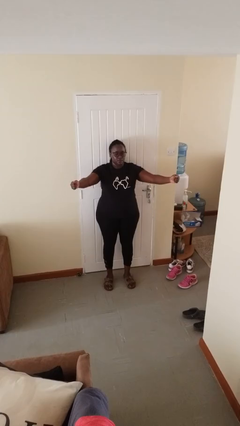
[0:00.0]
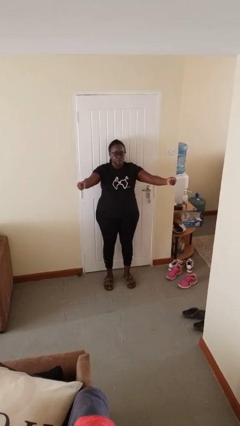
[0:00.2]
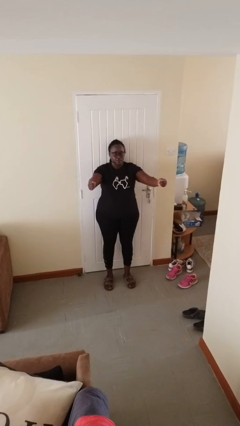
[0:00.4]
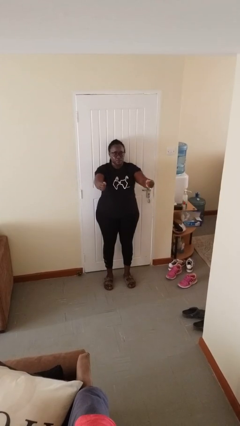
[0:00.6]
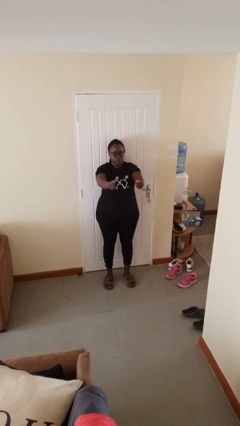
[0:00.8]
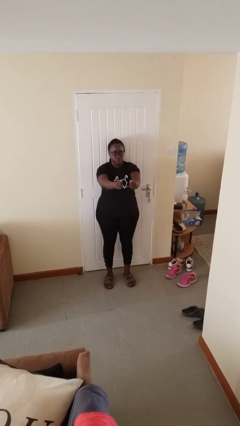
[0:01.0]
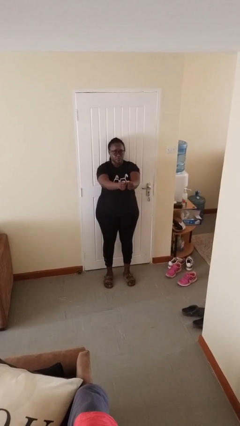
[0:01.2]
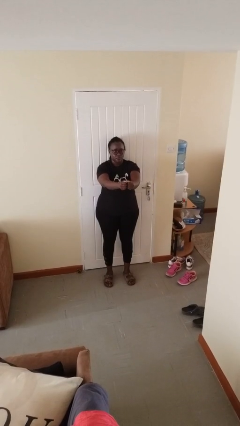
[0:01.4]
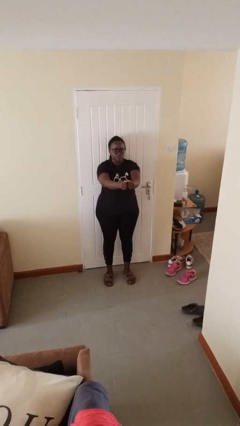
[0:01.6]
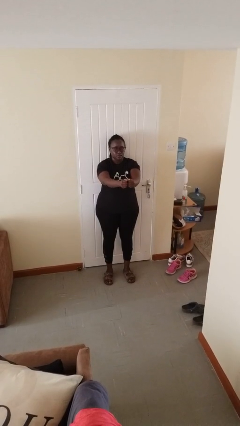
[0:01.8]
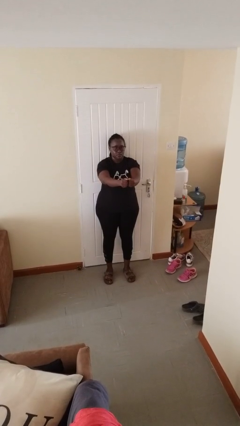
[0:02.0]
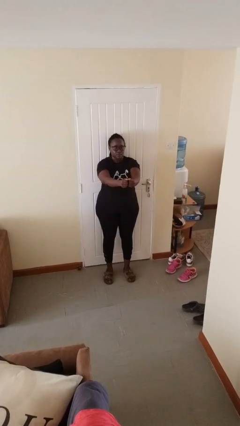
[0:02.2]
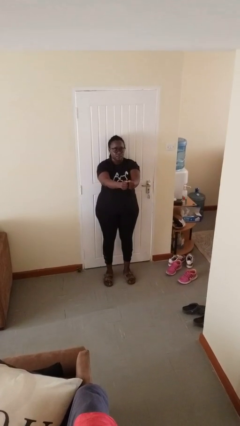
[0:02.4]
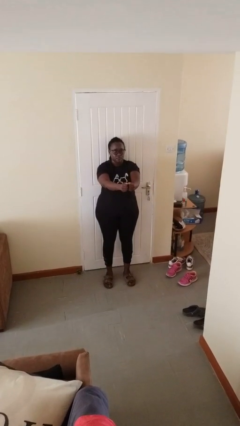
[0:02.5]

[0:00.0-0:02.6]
person gestures zoom out

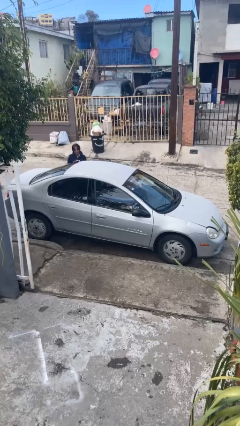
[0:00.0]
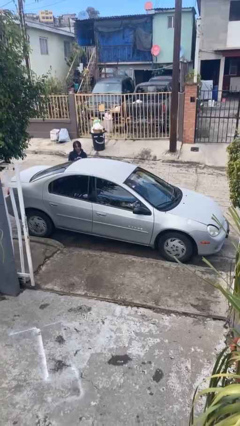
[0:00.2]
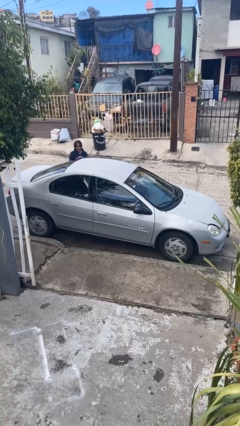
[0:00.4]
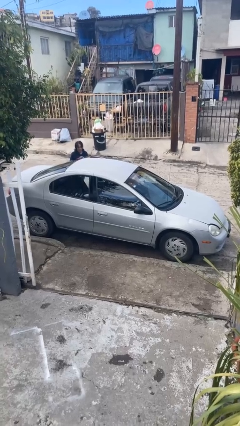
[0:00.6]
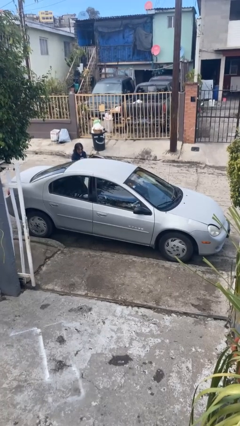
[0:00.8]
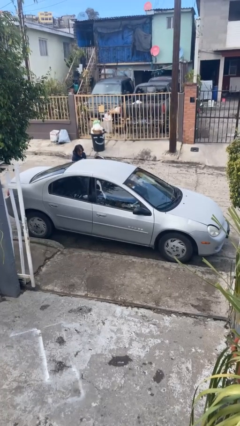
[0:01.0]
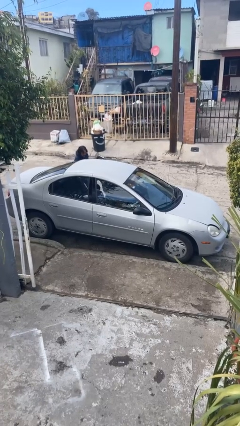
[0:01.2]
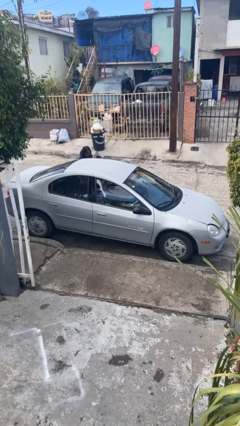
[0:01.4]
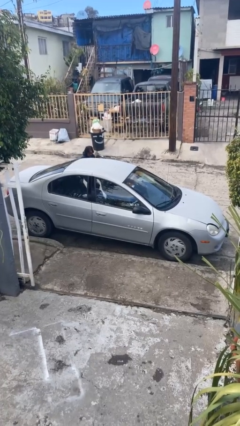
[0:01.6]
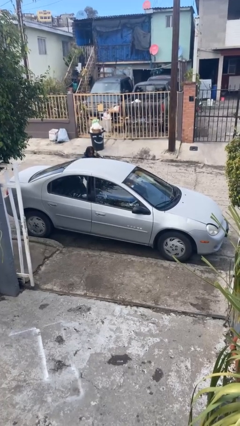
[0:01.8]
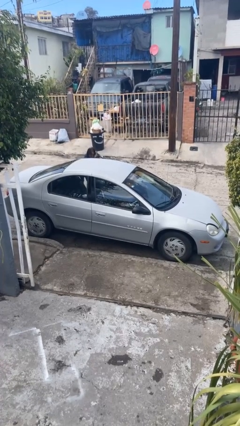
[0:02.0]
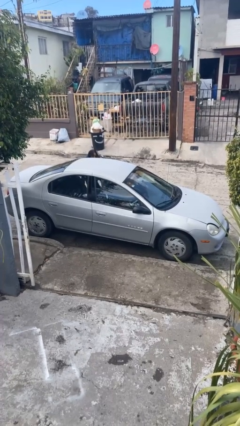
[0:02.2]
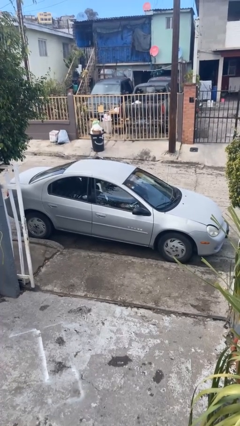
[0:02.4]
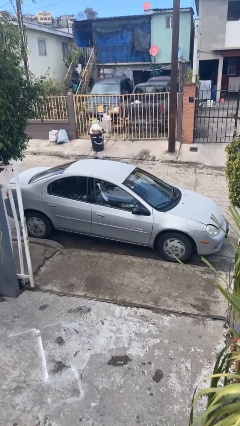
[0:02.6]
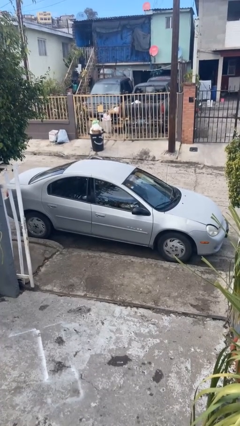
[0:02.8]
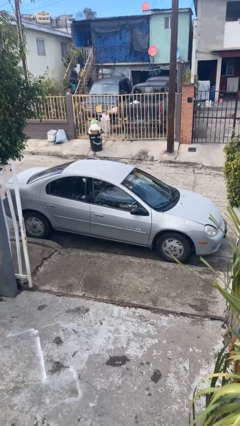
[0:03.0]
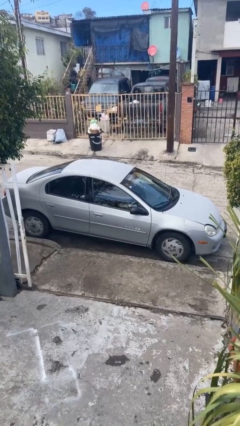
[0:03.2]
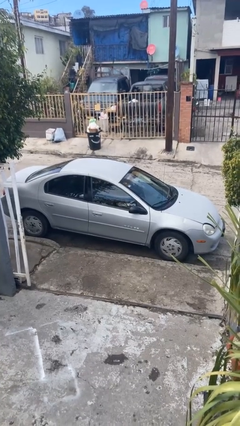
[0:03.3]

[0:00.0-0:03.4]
car picks up person

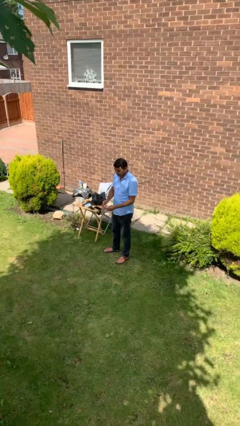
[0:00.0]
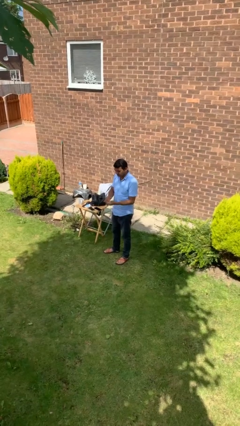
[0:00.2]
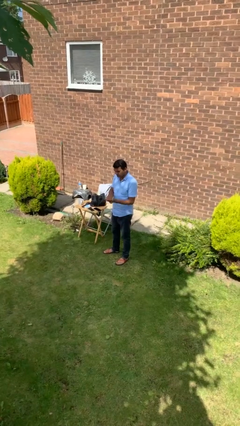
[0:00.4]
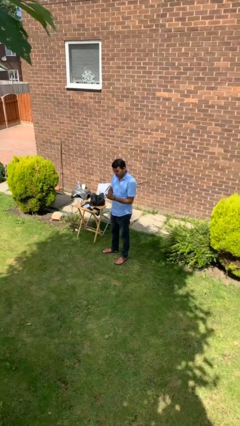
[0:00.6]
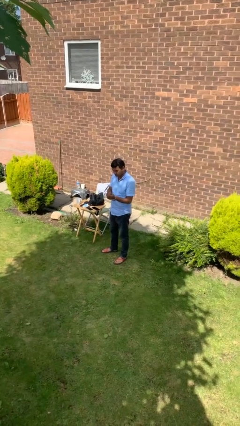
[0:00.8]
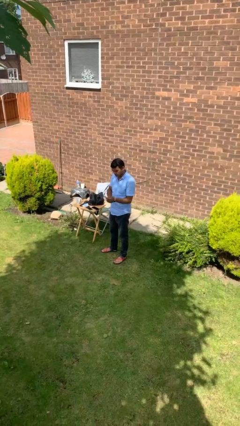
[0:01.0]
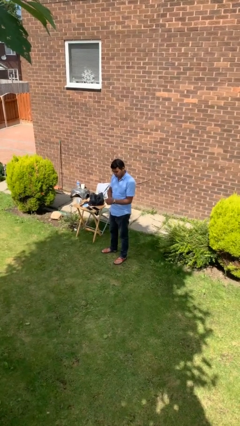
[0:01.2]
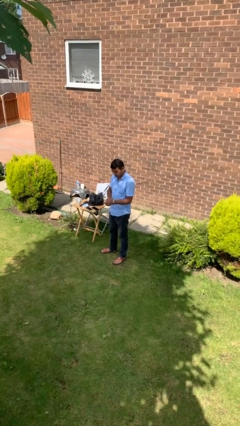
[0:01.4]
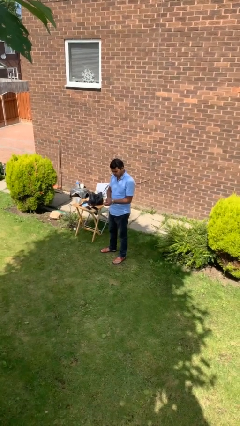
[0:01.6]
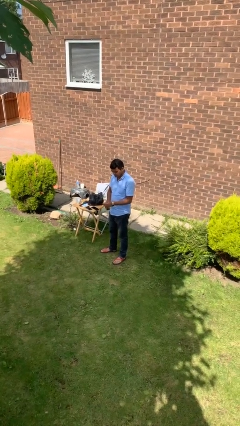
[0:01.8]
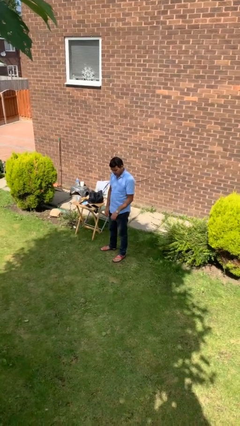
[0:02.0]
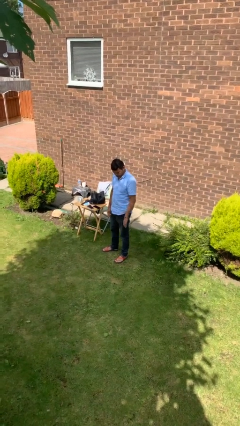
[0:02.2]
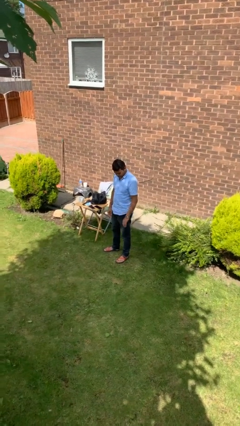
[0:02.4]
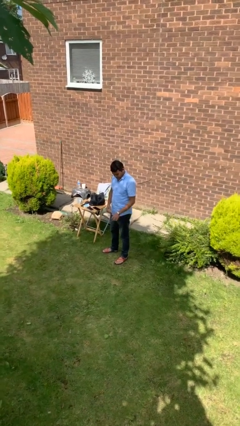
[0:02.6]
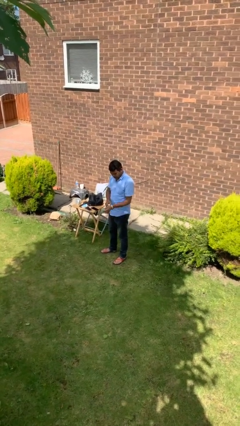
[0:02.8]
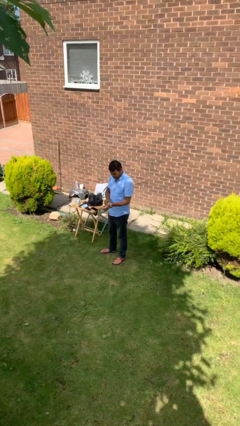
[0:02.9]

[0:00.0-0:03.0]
person puts on wristwatch

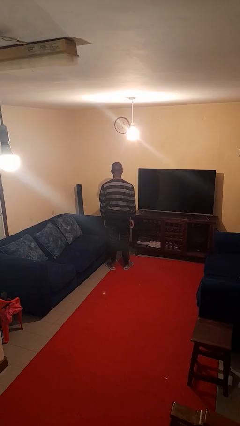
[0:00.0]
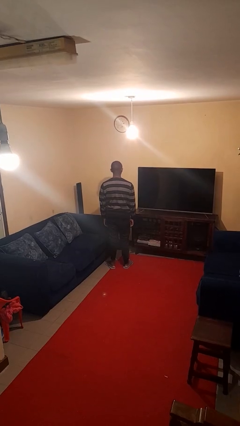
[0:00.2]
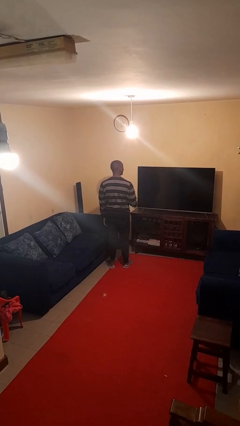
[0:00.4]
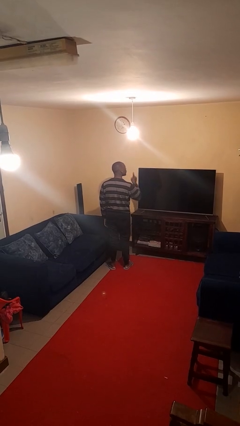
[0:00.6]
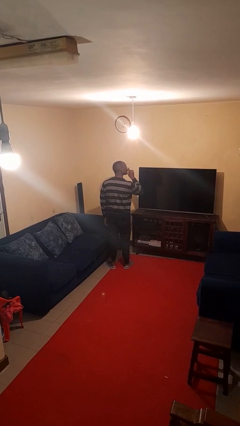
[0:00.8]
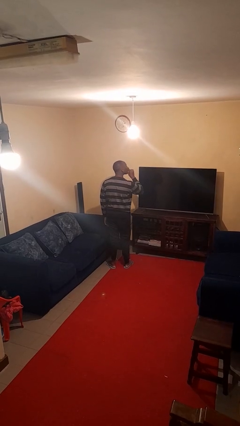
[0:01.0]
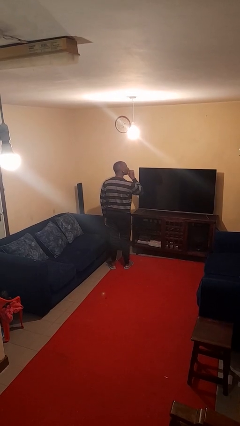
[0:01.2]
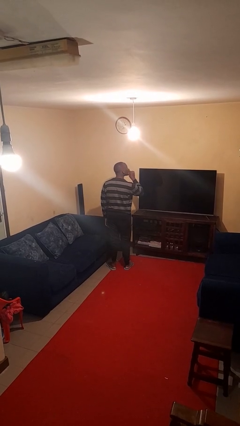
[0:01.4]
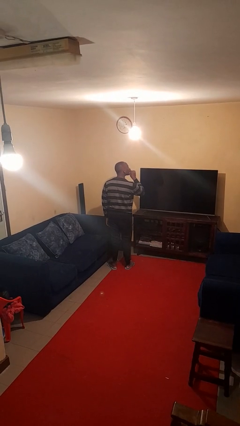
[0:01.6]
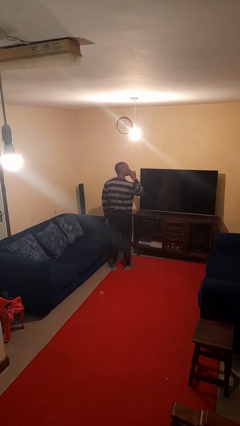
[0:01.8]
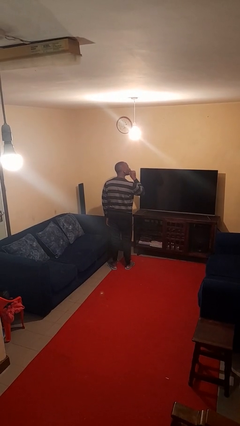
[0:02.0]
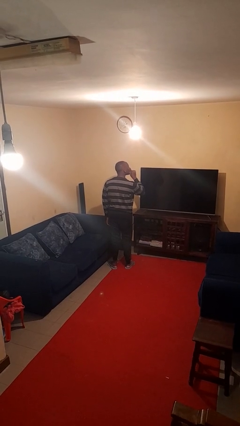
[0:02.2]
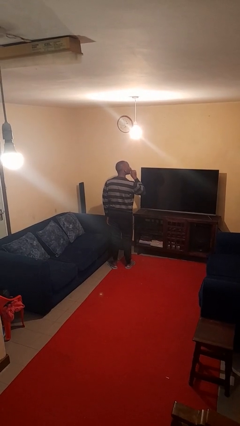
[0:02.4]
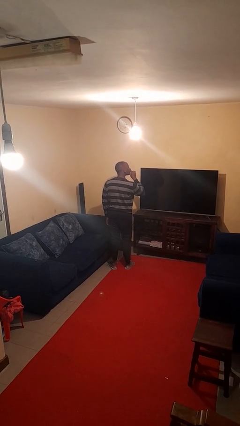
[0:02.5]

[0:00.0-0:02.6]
person gestures be quiet

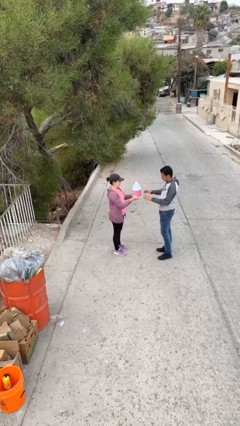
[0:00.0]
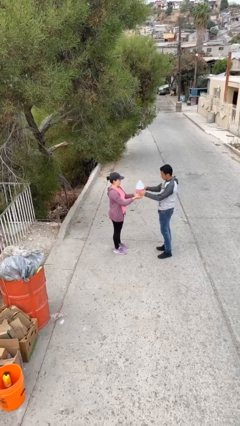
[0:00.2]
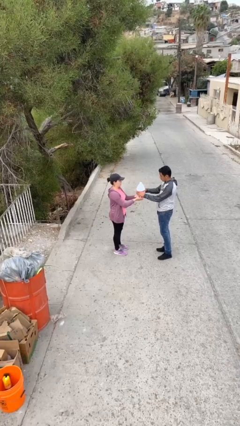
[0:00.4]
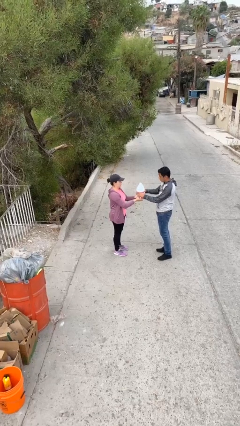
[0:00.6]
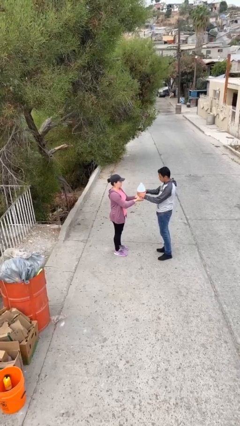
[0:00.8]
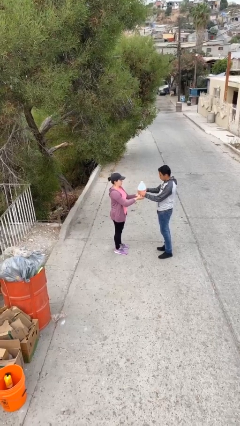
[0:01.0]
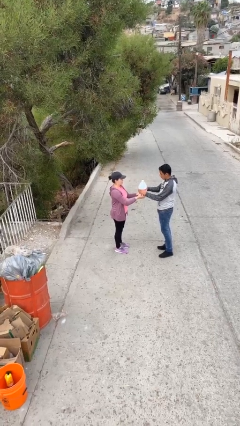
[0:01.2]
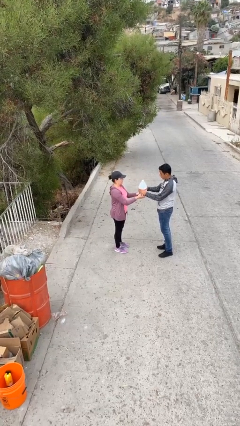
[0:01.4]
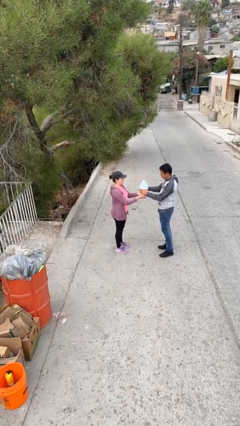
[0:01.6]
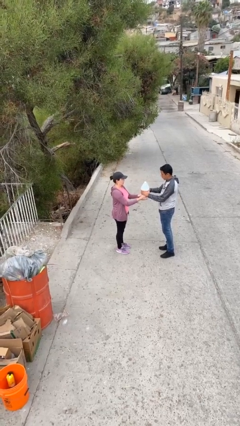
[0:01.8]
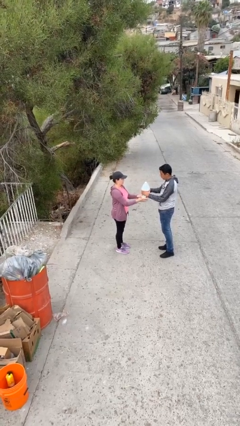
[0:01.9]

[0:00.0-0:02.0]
person transfers object to person

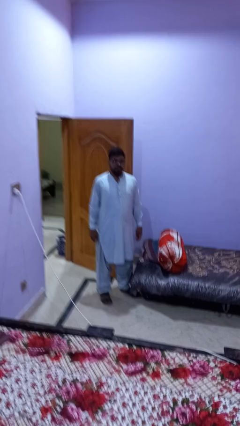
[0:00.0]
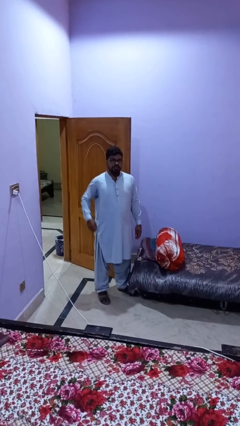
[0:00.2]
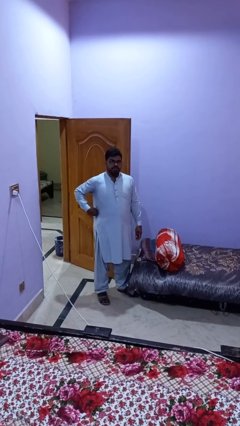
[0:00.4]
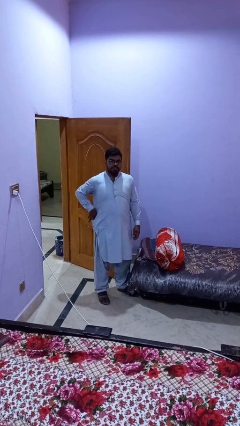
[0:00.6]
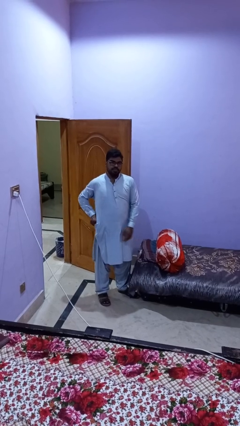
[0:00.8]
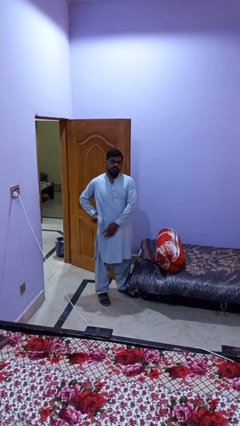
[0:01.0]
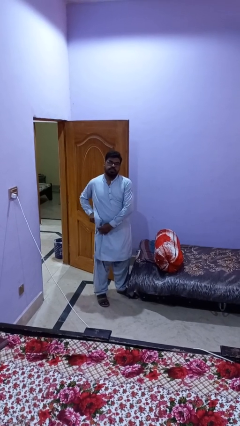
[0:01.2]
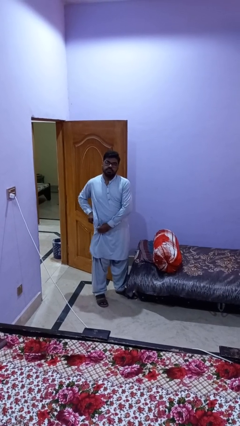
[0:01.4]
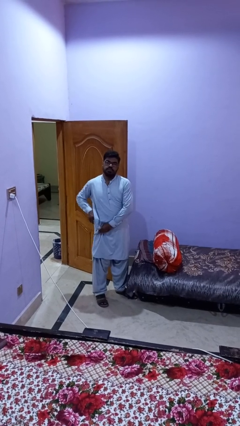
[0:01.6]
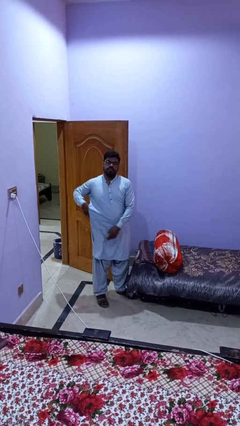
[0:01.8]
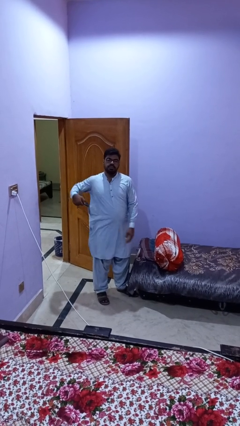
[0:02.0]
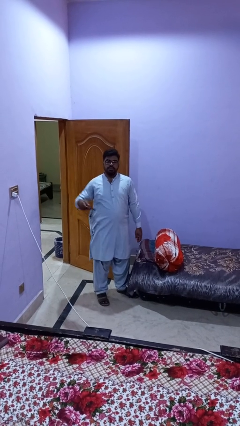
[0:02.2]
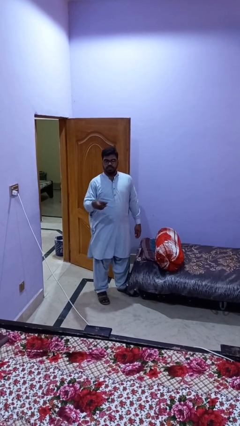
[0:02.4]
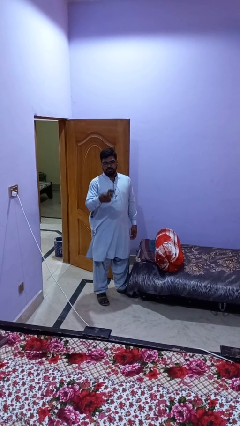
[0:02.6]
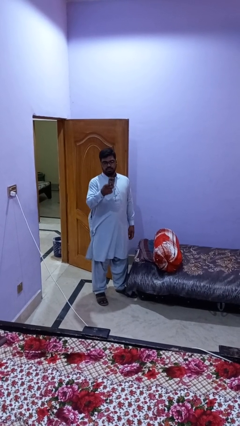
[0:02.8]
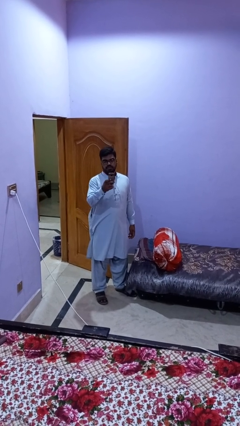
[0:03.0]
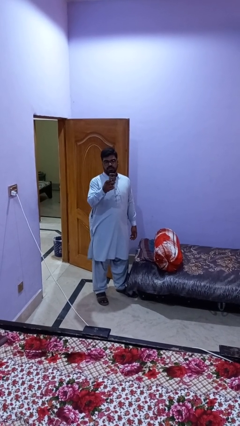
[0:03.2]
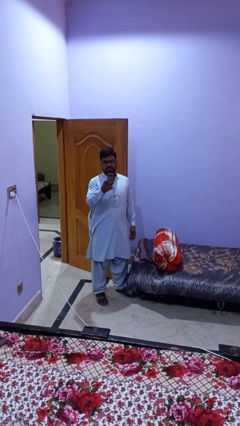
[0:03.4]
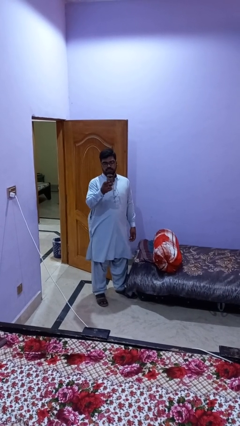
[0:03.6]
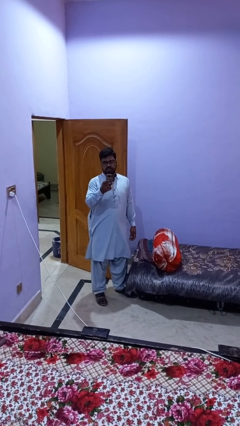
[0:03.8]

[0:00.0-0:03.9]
person takes phone from pocket
